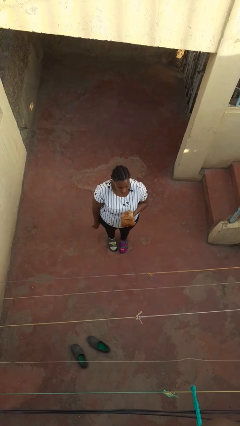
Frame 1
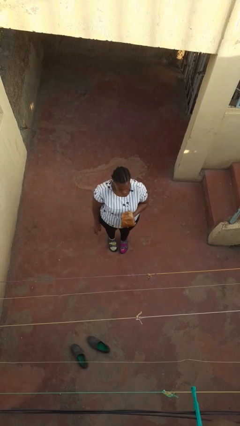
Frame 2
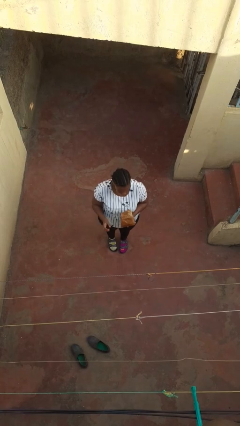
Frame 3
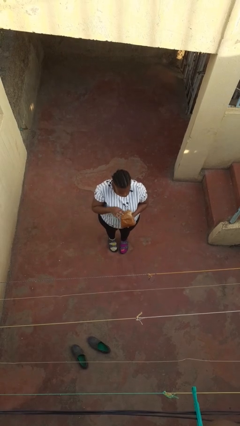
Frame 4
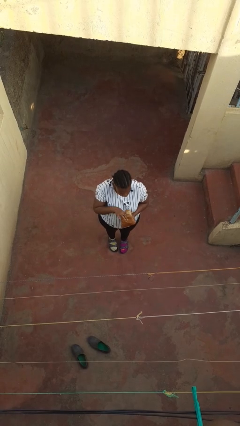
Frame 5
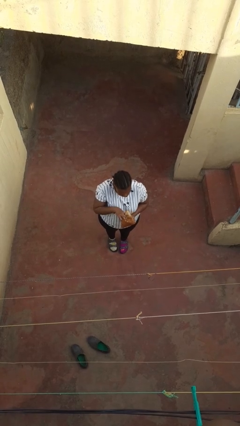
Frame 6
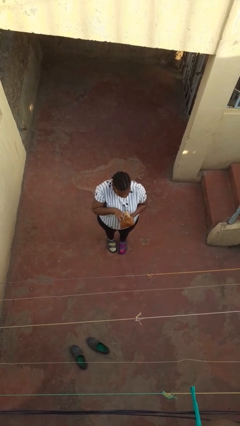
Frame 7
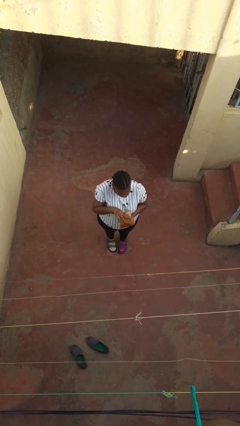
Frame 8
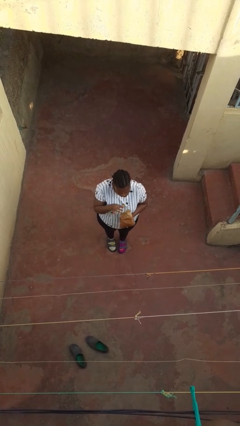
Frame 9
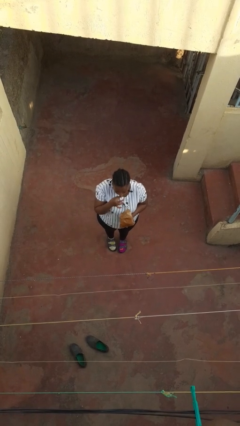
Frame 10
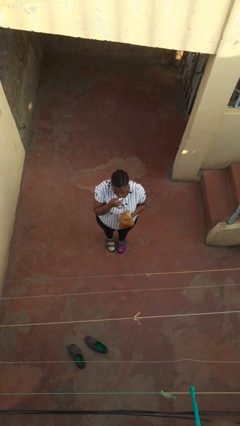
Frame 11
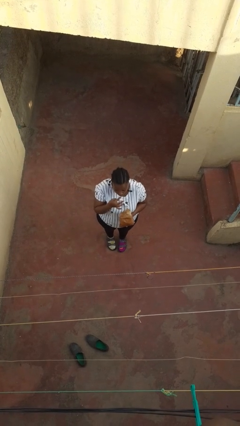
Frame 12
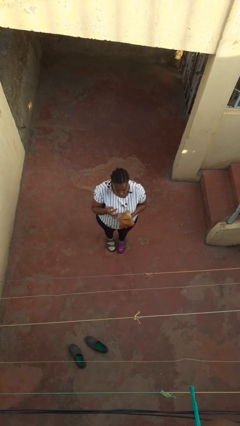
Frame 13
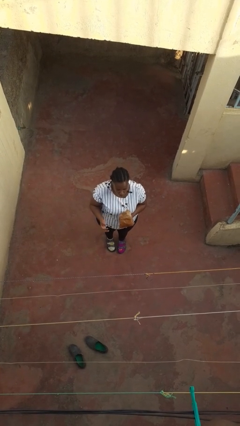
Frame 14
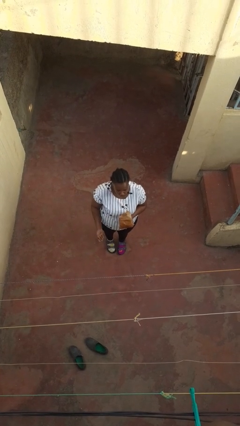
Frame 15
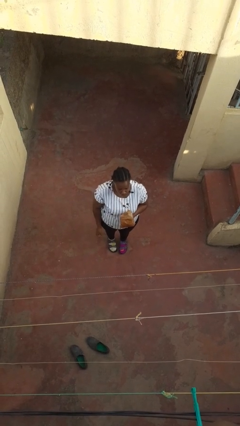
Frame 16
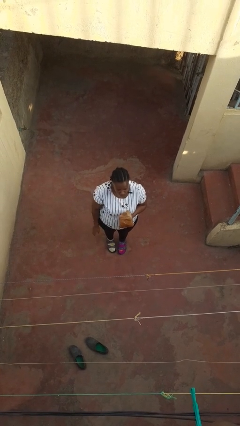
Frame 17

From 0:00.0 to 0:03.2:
person eats snack from bag

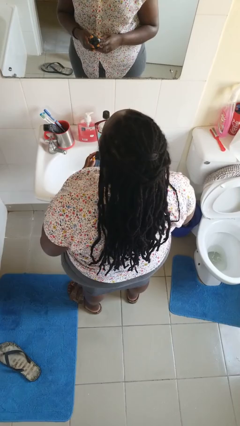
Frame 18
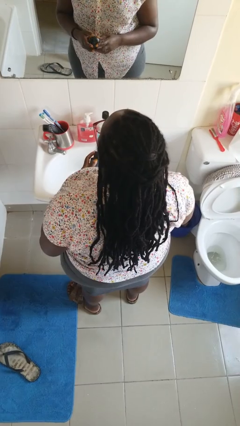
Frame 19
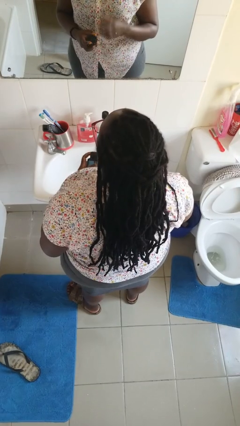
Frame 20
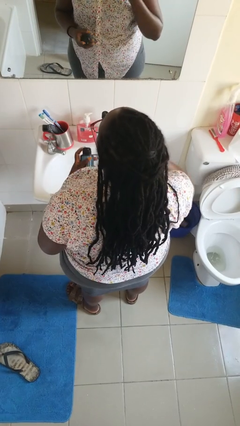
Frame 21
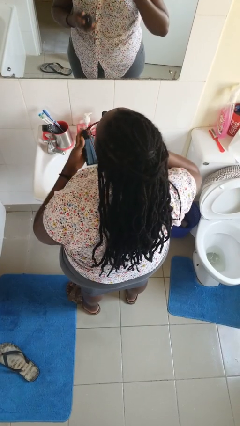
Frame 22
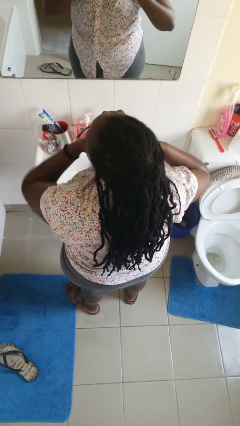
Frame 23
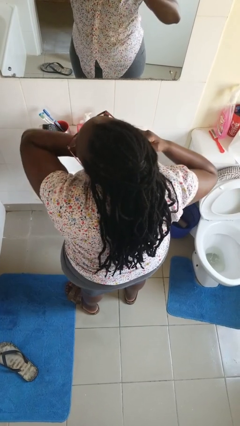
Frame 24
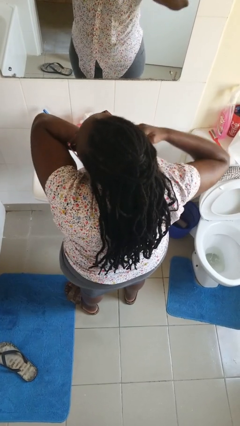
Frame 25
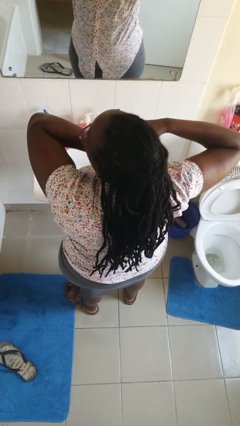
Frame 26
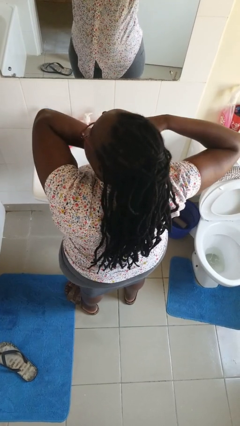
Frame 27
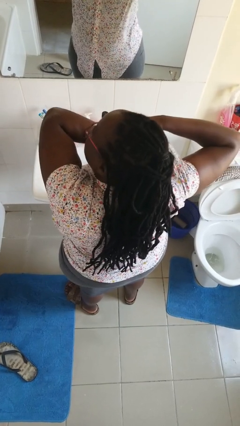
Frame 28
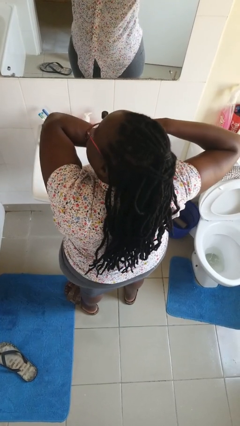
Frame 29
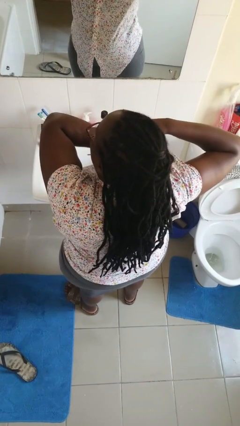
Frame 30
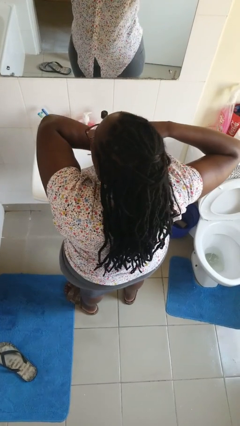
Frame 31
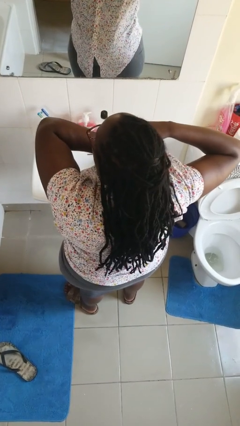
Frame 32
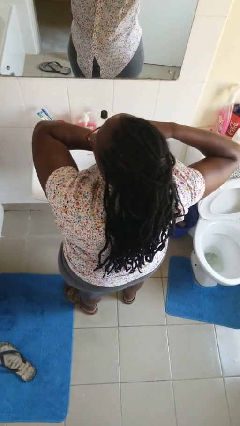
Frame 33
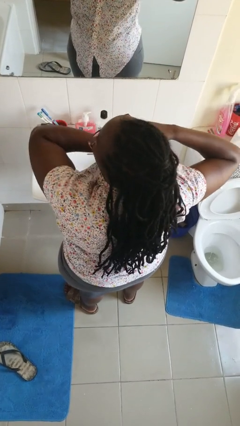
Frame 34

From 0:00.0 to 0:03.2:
person applies deodorant

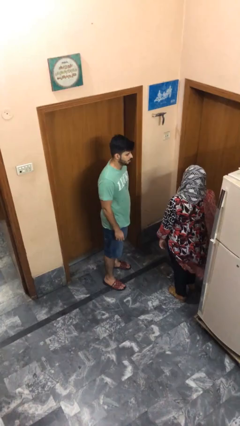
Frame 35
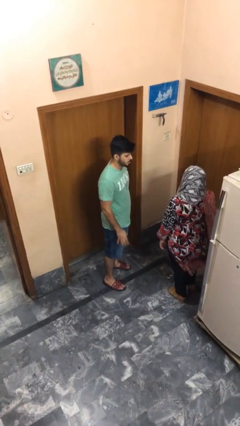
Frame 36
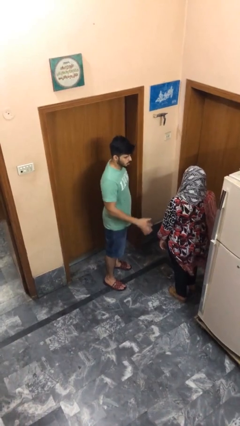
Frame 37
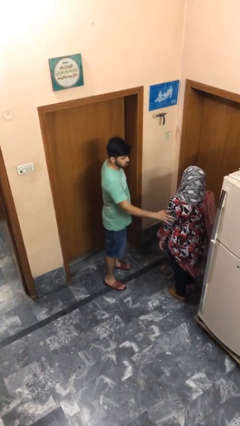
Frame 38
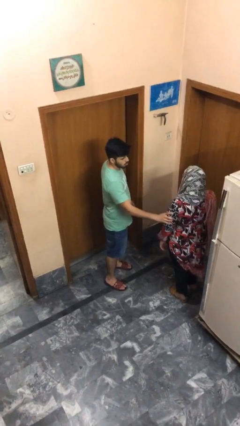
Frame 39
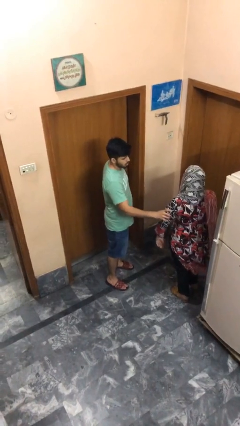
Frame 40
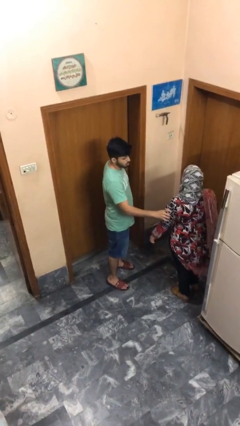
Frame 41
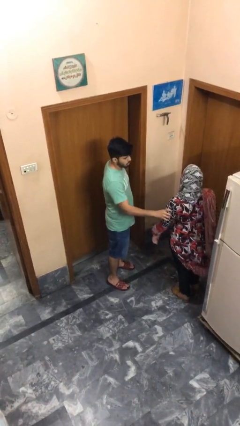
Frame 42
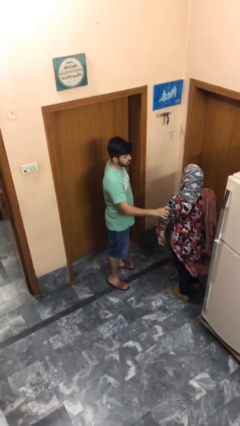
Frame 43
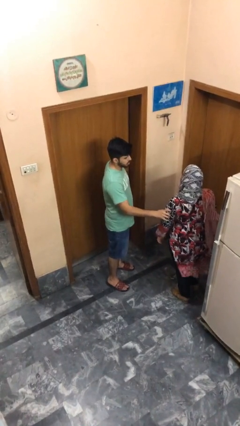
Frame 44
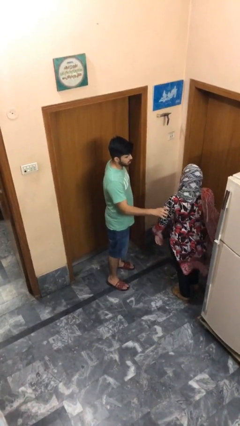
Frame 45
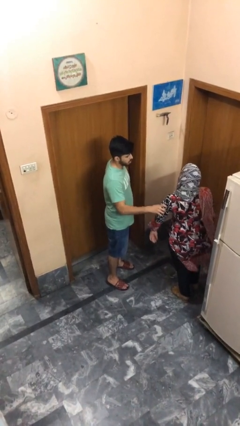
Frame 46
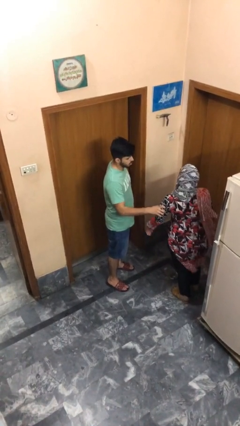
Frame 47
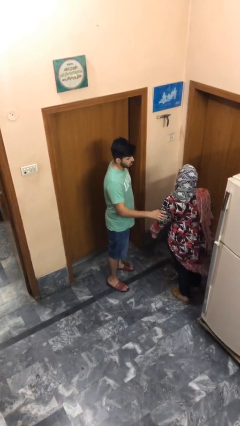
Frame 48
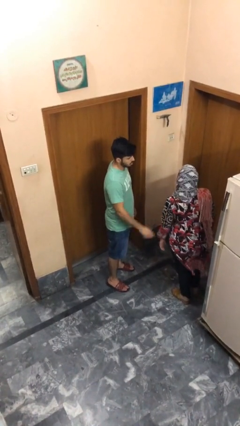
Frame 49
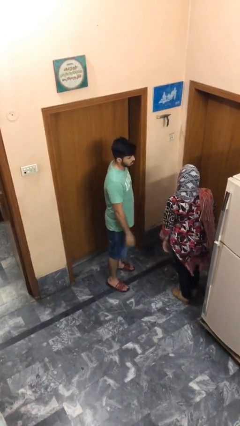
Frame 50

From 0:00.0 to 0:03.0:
person grabs person by bicep

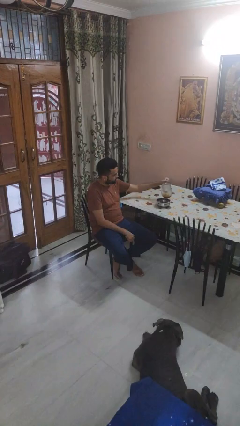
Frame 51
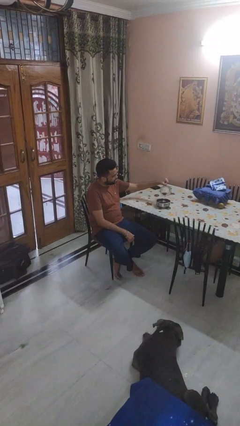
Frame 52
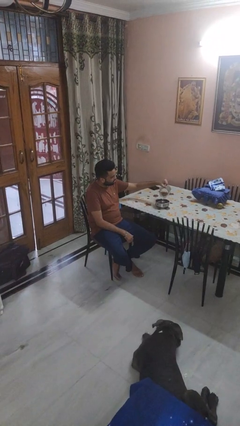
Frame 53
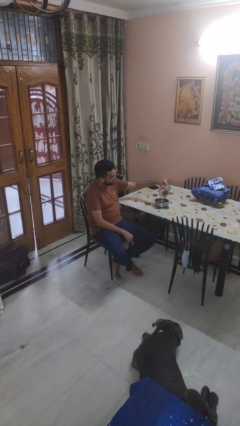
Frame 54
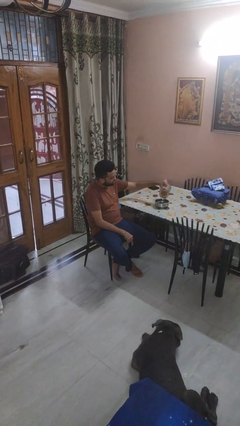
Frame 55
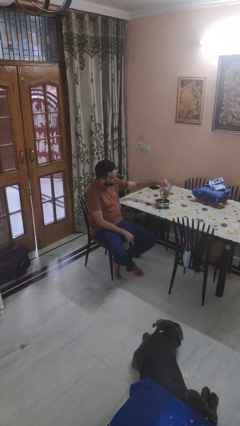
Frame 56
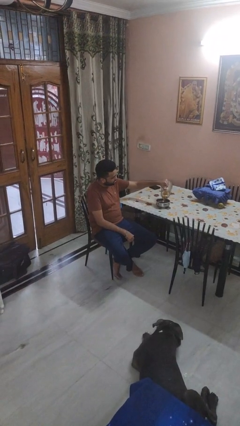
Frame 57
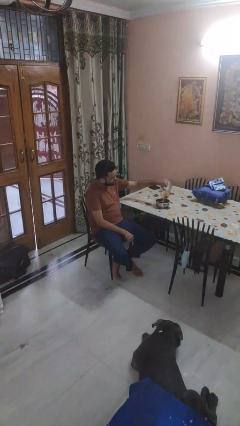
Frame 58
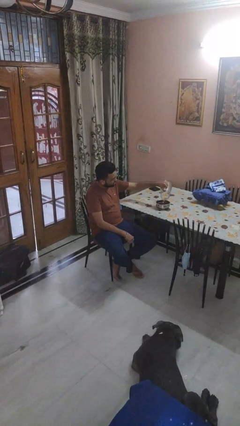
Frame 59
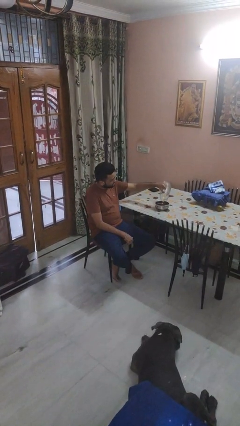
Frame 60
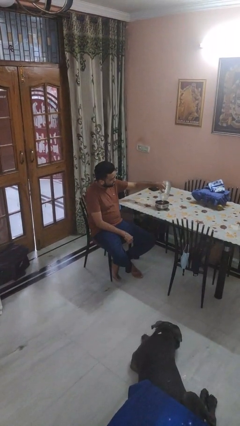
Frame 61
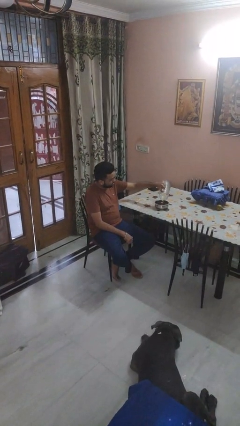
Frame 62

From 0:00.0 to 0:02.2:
person pours into bowl

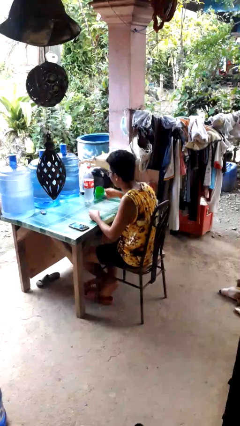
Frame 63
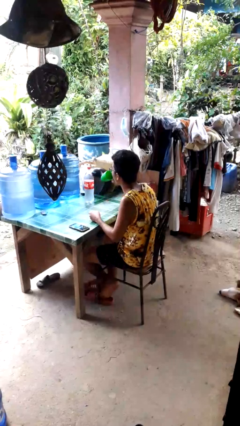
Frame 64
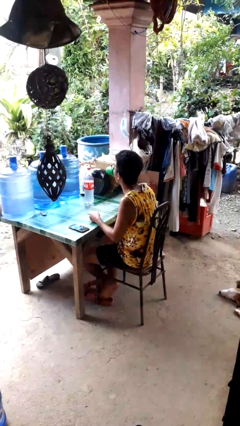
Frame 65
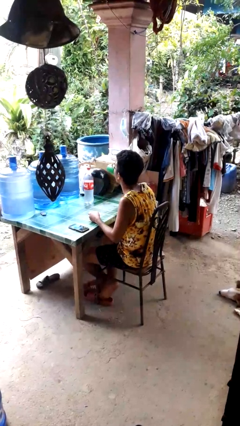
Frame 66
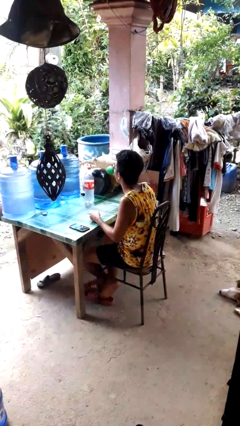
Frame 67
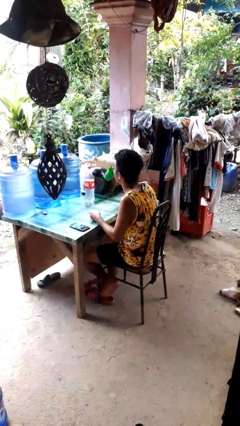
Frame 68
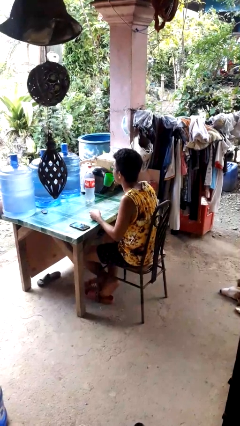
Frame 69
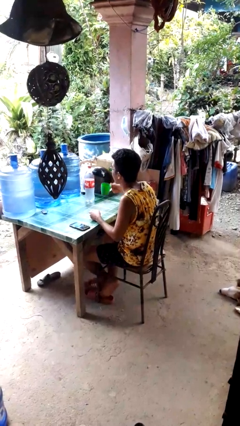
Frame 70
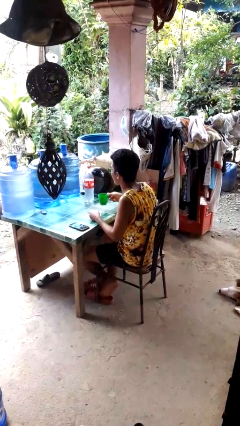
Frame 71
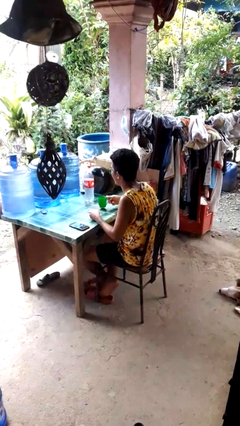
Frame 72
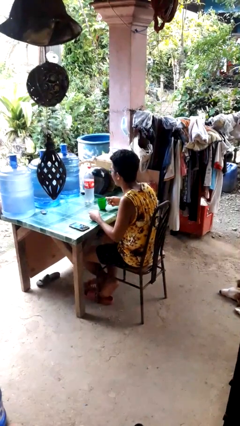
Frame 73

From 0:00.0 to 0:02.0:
person drinks from cup

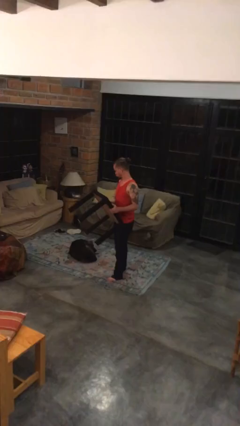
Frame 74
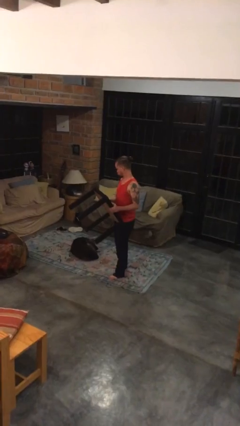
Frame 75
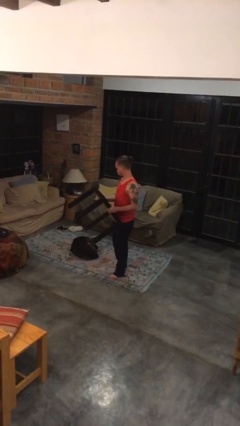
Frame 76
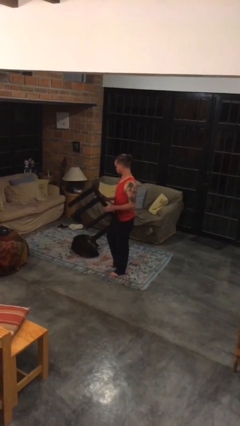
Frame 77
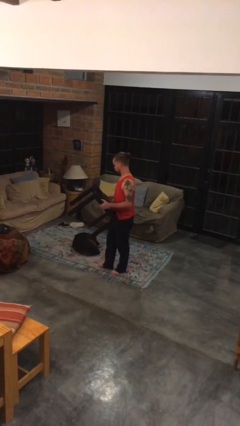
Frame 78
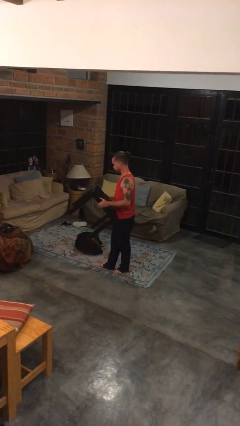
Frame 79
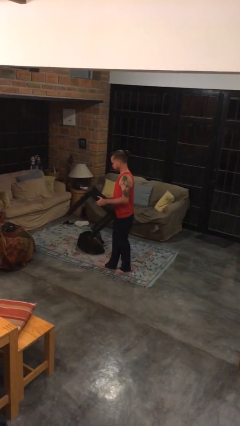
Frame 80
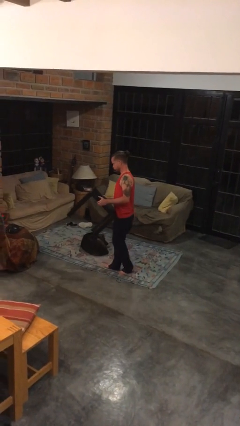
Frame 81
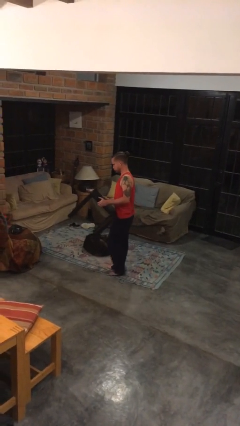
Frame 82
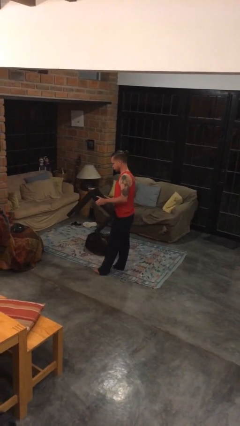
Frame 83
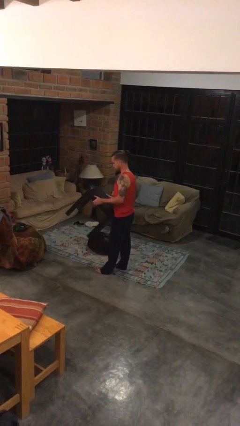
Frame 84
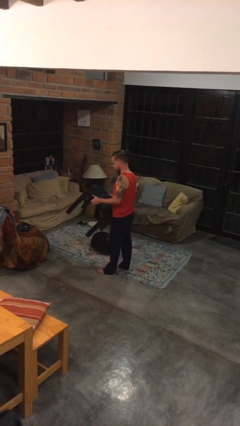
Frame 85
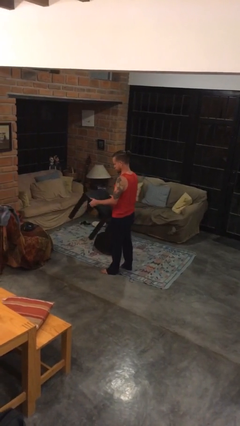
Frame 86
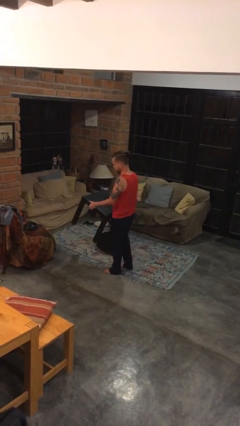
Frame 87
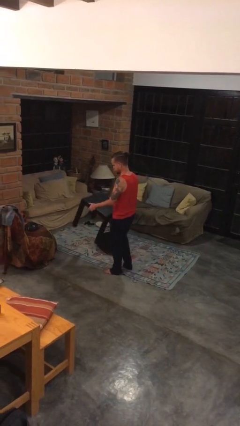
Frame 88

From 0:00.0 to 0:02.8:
person carries furniture

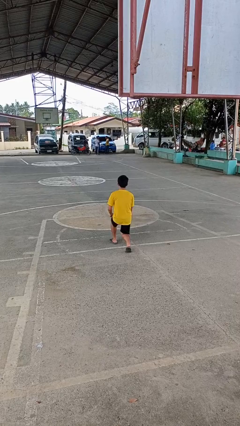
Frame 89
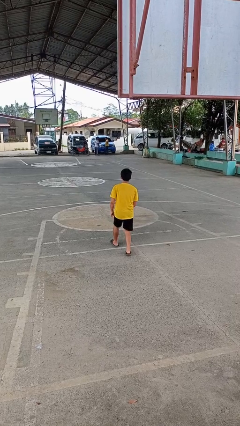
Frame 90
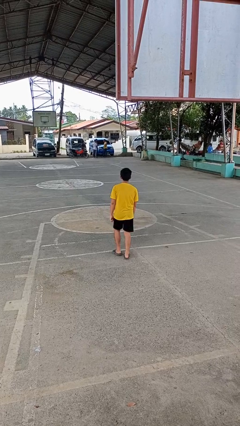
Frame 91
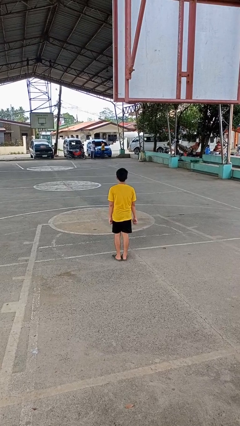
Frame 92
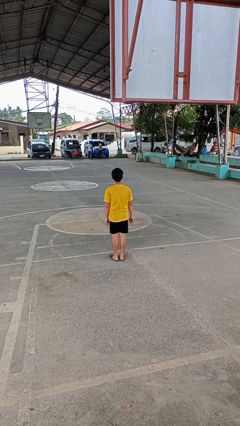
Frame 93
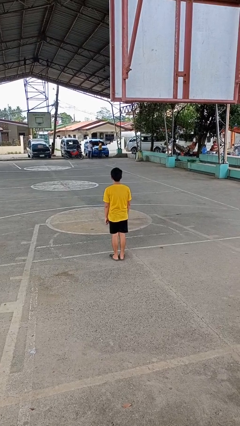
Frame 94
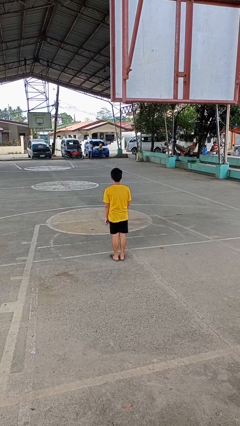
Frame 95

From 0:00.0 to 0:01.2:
person stands up from floor
